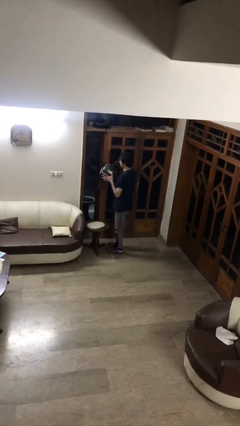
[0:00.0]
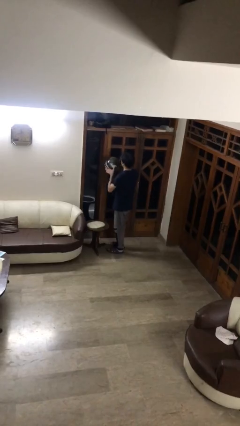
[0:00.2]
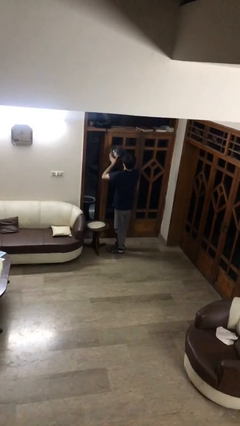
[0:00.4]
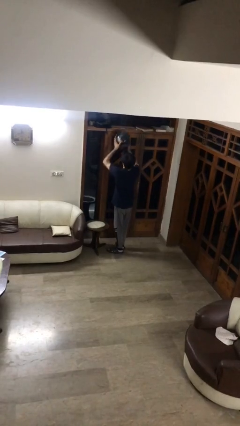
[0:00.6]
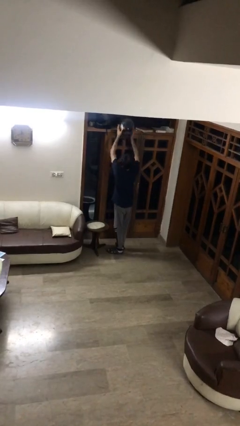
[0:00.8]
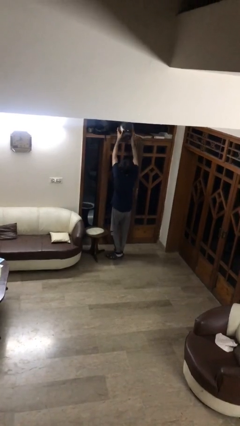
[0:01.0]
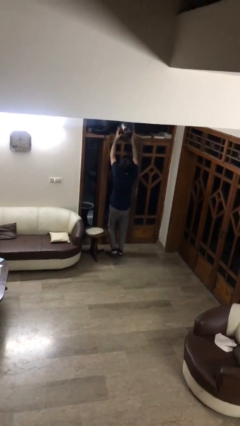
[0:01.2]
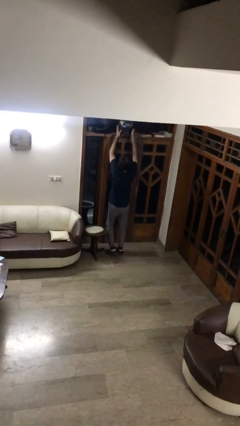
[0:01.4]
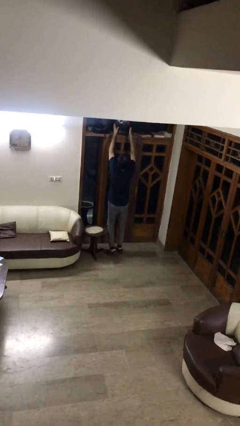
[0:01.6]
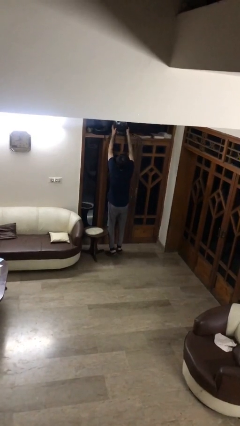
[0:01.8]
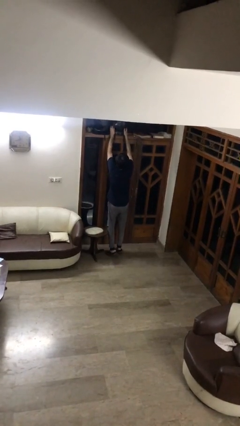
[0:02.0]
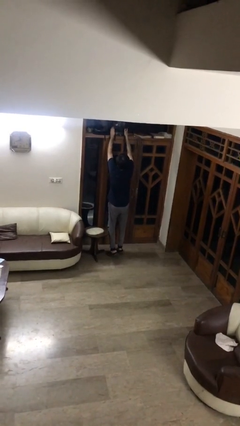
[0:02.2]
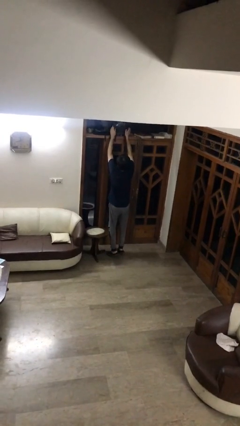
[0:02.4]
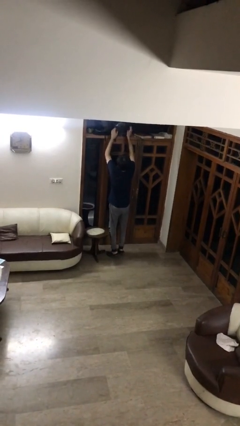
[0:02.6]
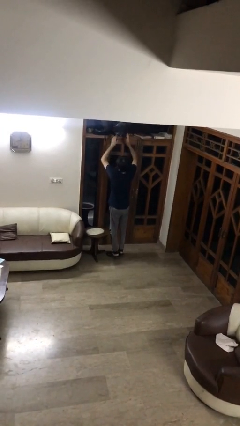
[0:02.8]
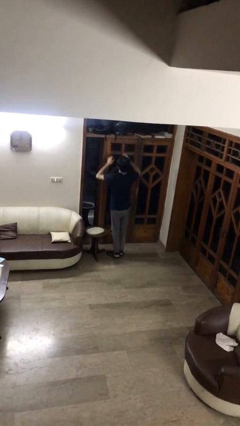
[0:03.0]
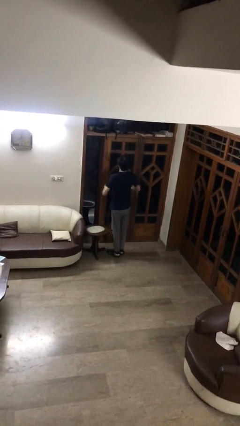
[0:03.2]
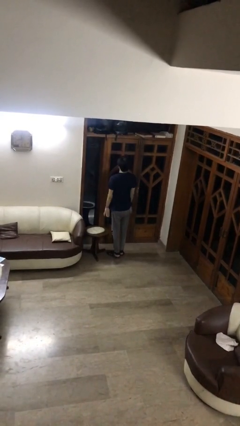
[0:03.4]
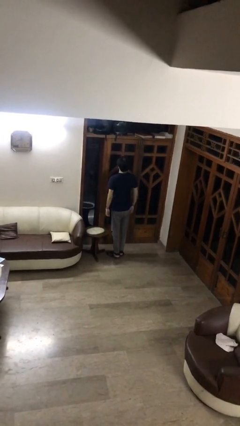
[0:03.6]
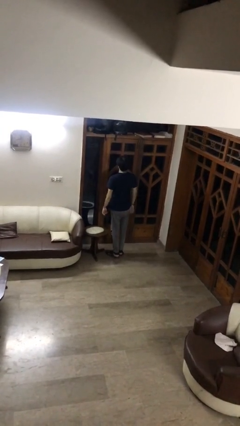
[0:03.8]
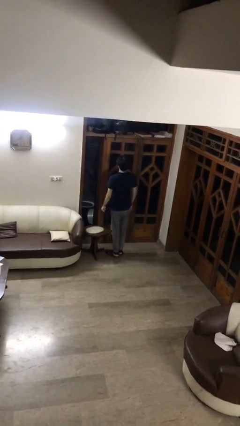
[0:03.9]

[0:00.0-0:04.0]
person puts down object on shelf

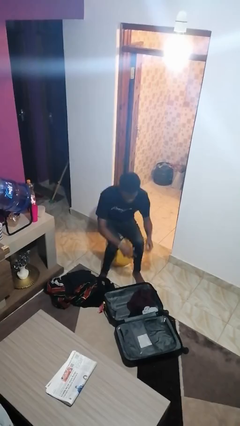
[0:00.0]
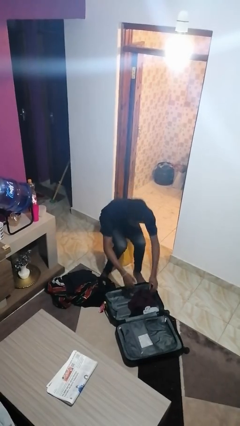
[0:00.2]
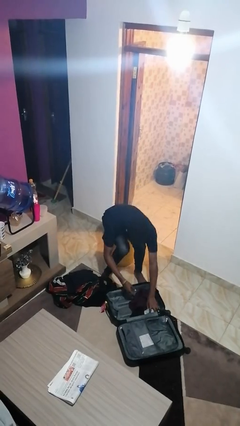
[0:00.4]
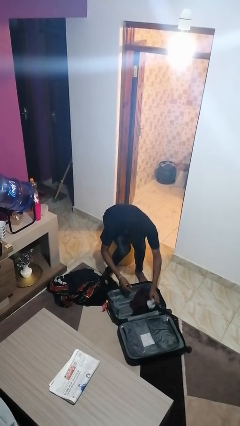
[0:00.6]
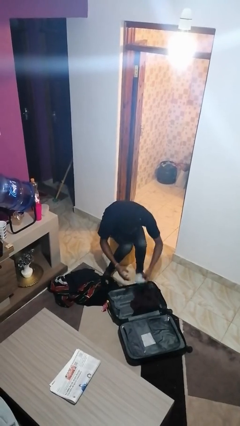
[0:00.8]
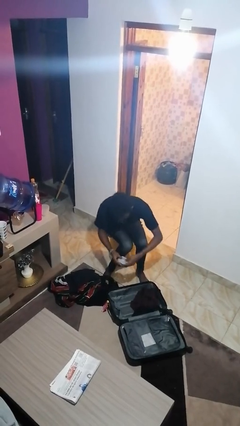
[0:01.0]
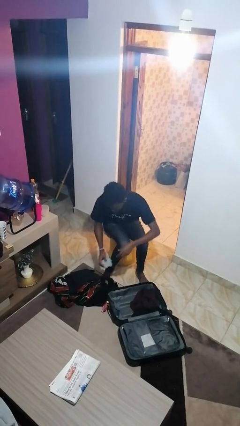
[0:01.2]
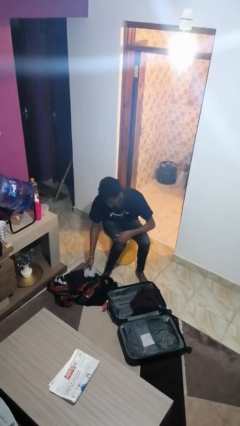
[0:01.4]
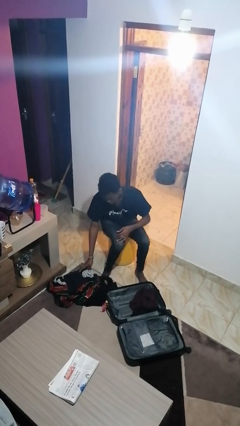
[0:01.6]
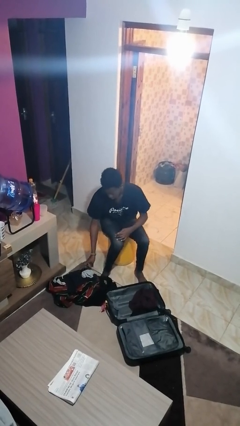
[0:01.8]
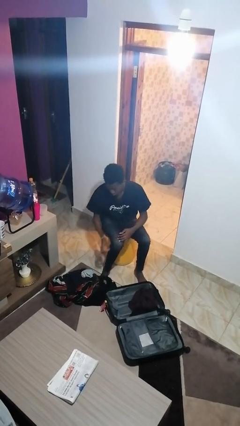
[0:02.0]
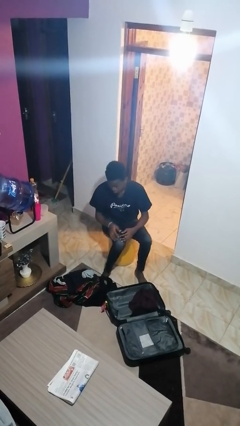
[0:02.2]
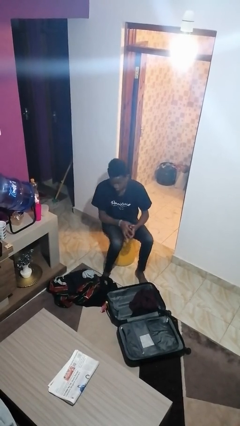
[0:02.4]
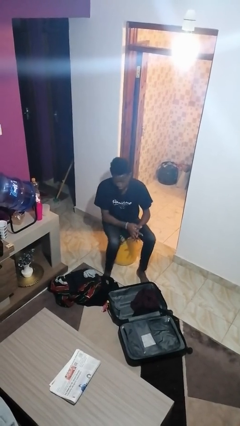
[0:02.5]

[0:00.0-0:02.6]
person unloads clothes from suitcase

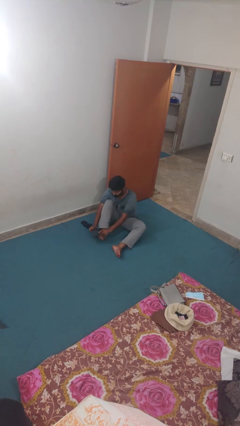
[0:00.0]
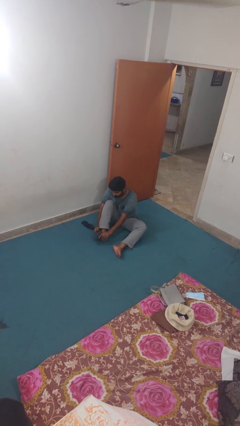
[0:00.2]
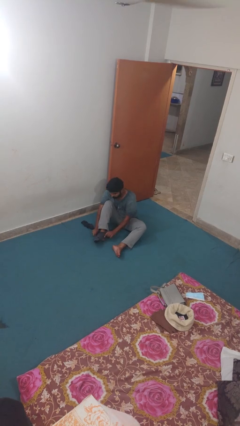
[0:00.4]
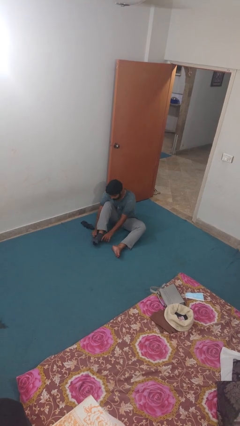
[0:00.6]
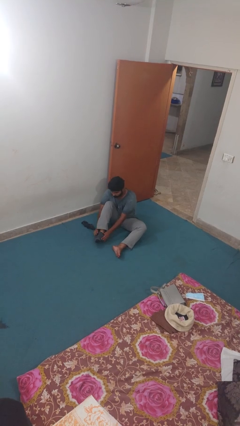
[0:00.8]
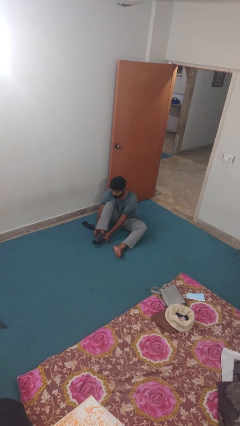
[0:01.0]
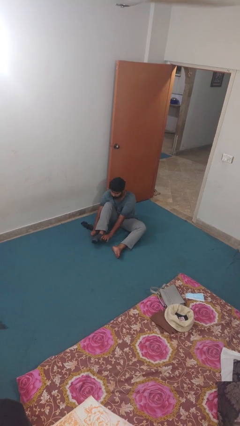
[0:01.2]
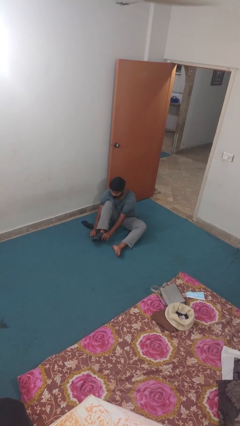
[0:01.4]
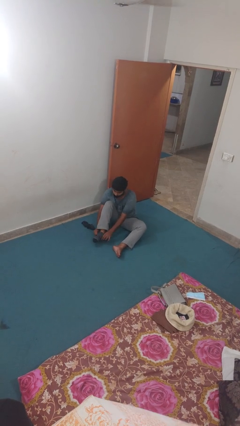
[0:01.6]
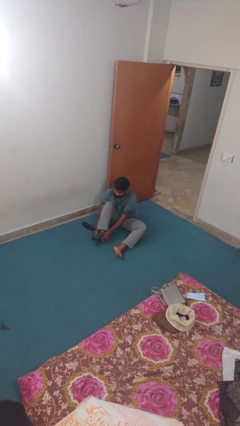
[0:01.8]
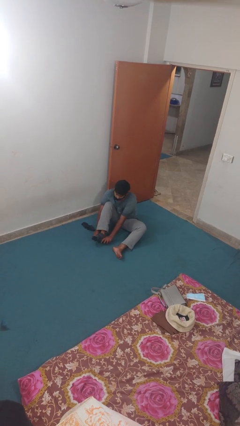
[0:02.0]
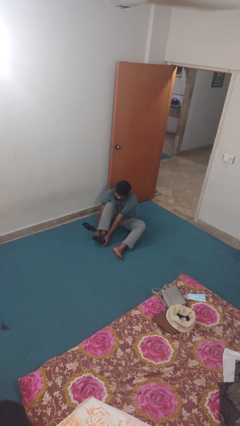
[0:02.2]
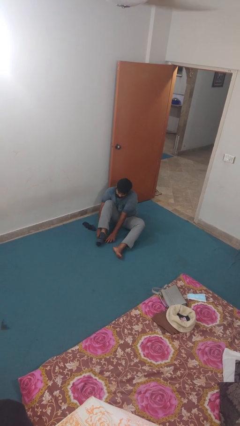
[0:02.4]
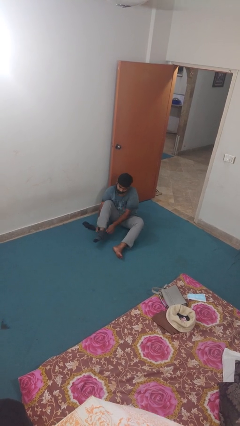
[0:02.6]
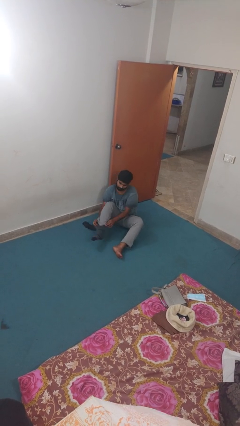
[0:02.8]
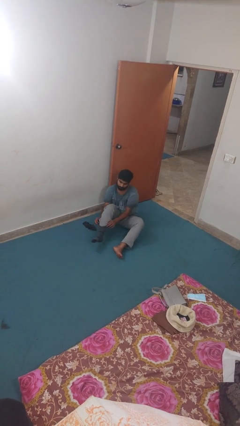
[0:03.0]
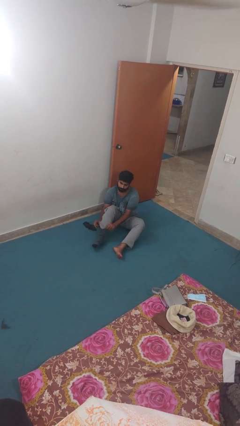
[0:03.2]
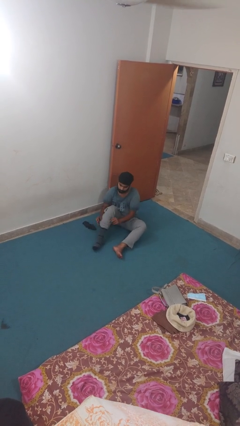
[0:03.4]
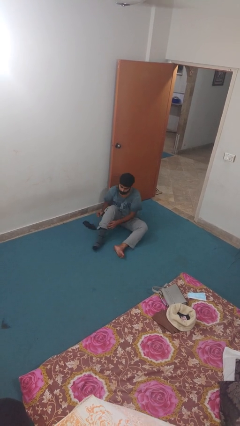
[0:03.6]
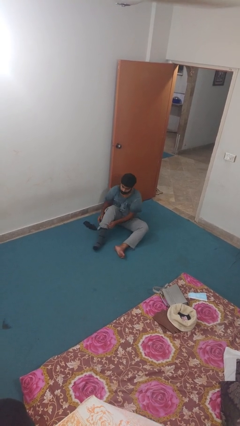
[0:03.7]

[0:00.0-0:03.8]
person puts on socks

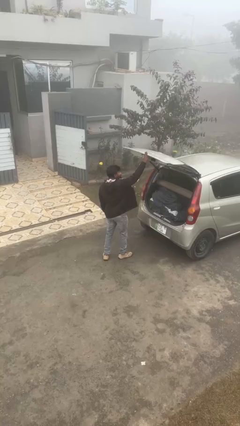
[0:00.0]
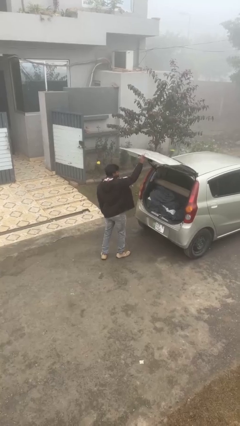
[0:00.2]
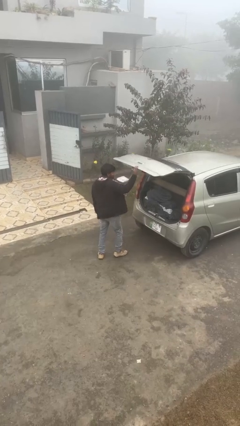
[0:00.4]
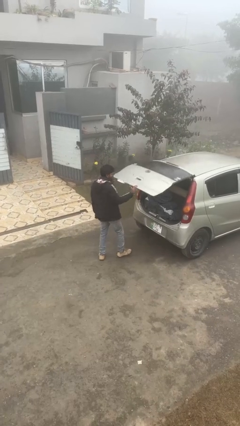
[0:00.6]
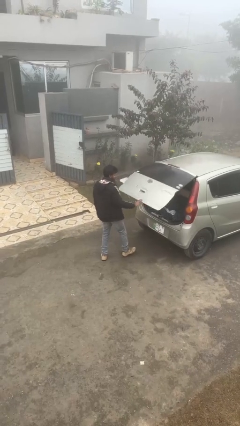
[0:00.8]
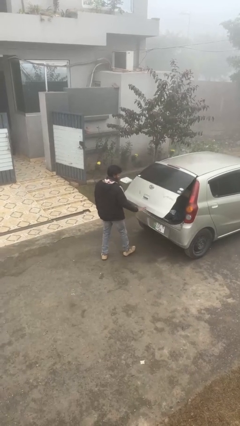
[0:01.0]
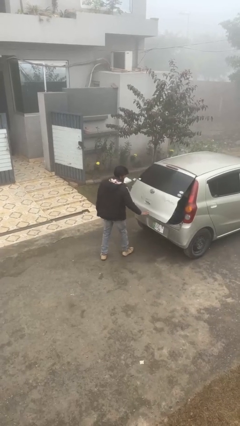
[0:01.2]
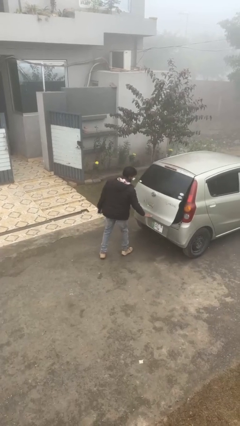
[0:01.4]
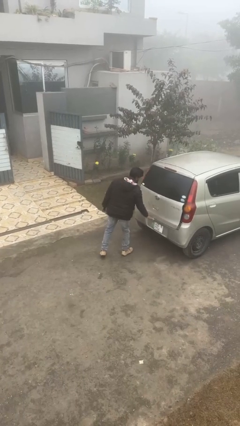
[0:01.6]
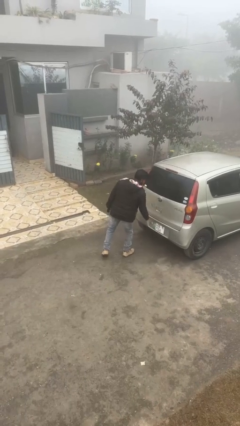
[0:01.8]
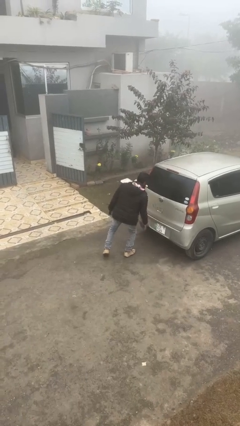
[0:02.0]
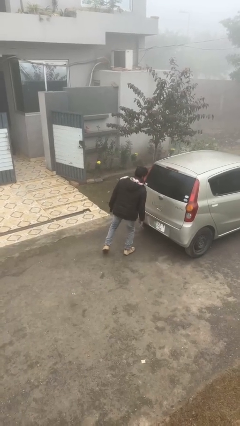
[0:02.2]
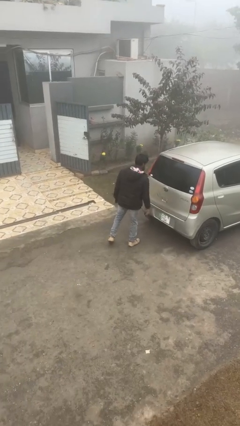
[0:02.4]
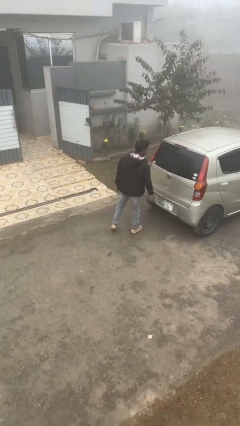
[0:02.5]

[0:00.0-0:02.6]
person closes car trunk

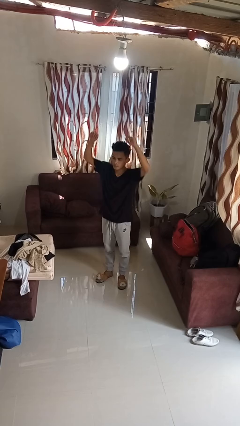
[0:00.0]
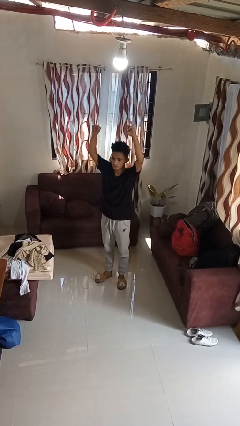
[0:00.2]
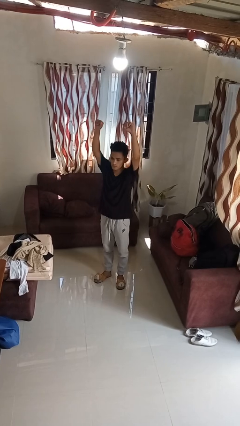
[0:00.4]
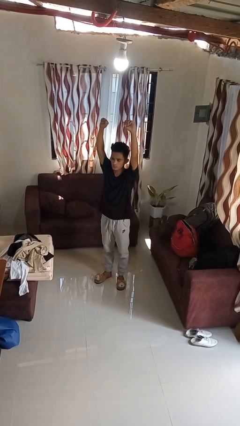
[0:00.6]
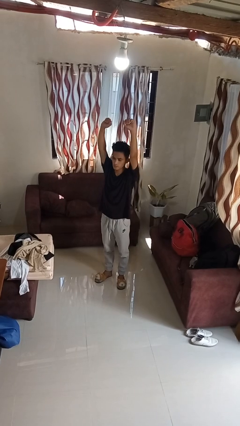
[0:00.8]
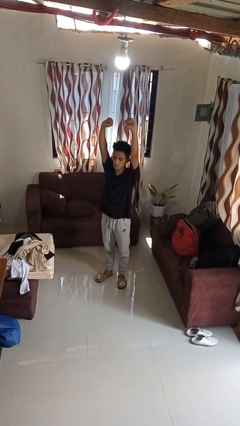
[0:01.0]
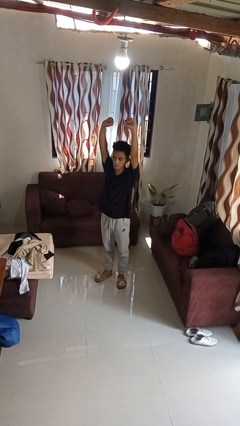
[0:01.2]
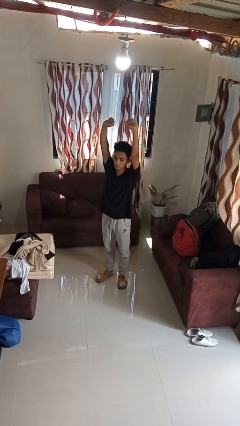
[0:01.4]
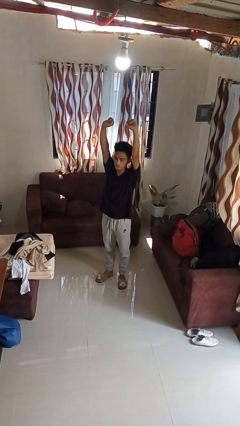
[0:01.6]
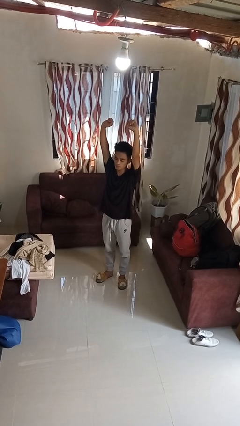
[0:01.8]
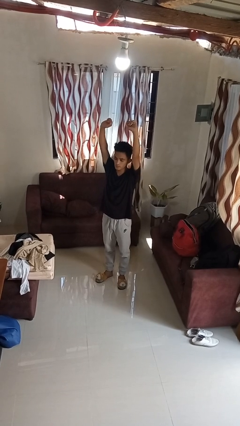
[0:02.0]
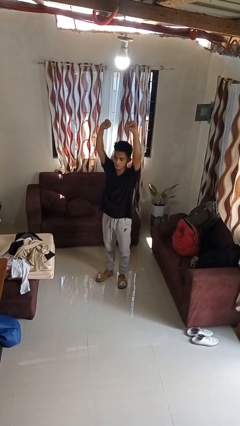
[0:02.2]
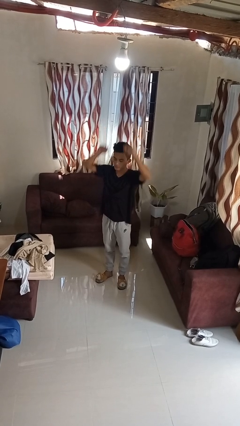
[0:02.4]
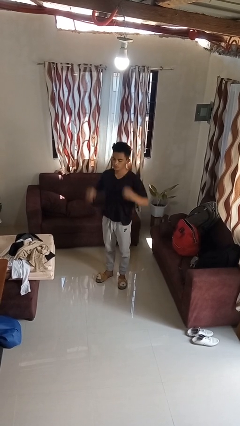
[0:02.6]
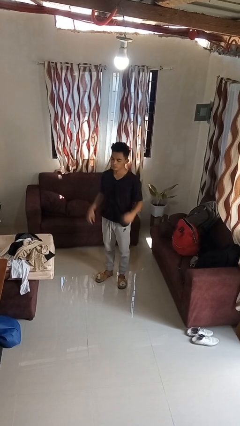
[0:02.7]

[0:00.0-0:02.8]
person stretches arms over head

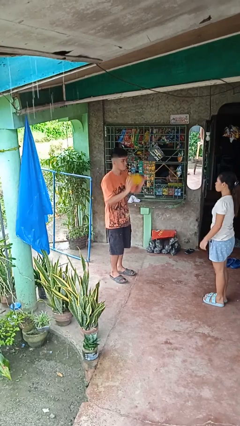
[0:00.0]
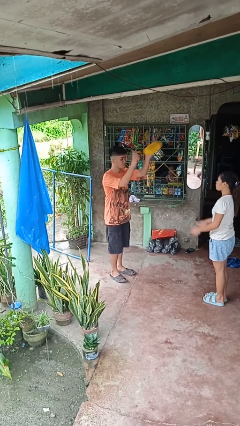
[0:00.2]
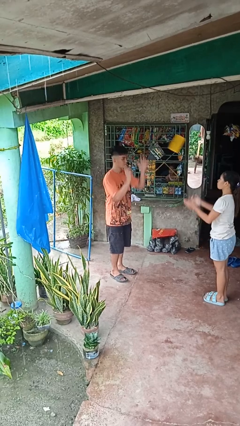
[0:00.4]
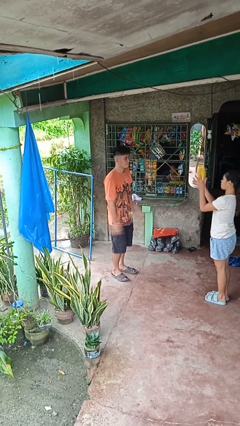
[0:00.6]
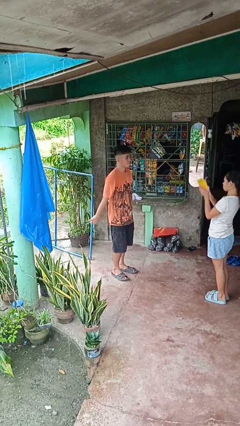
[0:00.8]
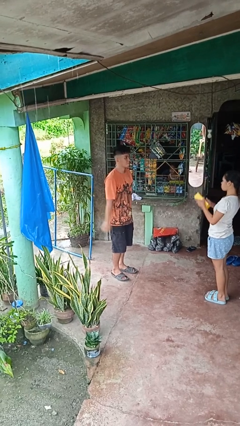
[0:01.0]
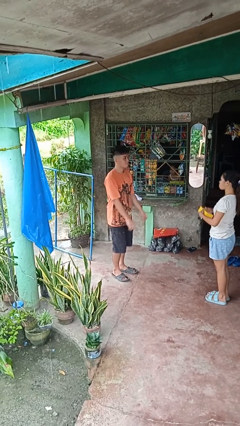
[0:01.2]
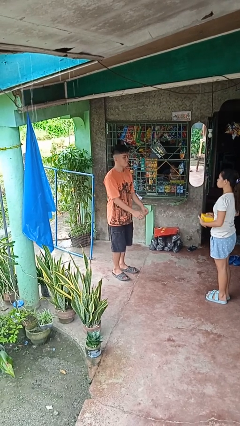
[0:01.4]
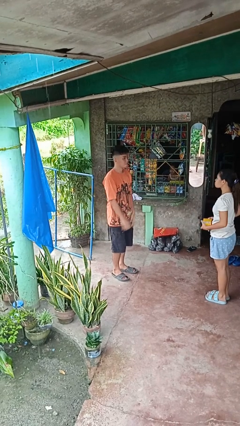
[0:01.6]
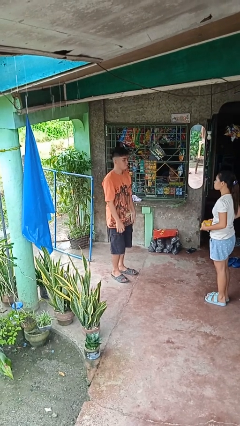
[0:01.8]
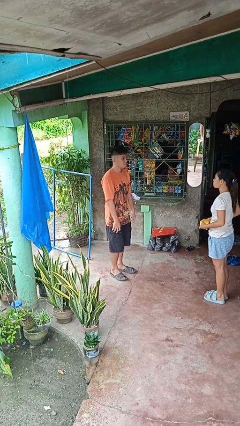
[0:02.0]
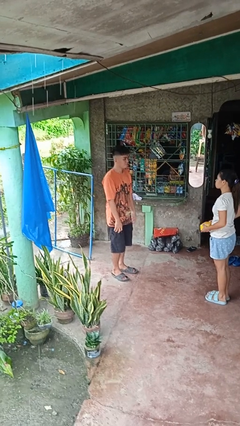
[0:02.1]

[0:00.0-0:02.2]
person throws object to person
